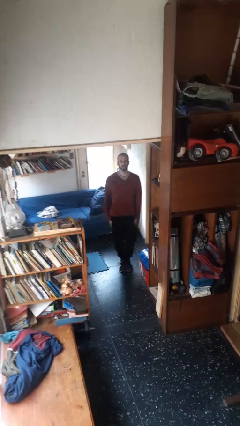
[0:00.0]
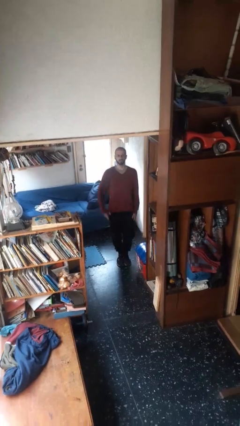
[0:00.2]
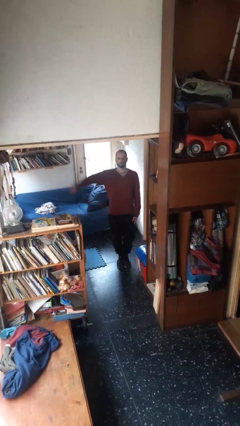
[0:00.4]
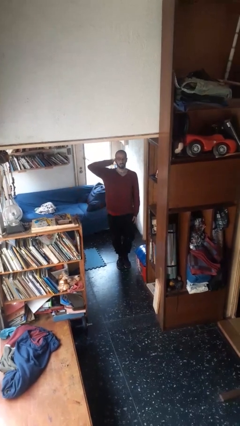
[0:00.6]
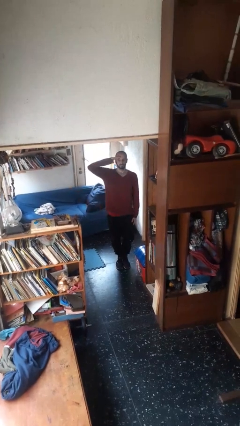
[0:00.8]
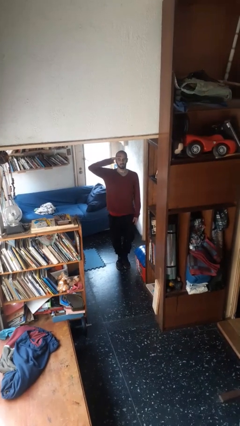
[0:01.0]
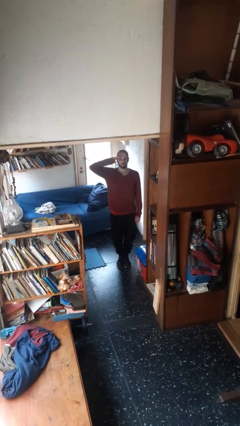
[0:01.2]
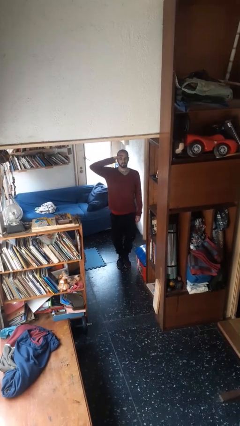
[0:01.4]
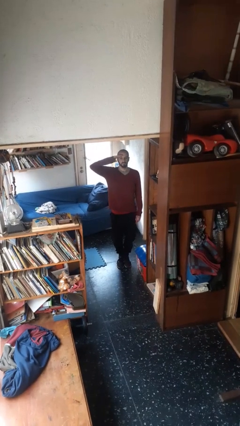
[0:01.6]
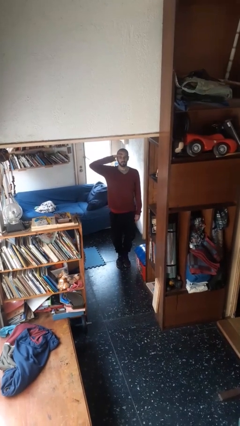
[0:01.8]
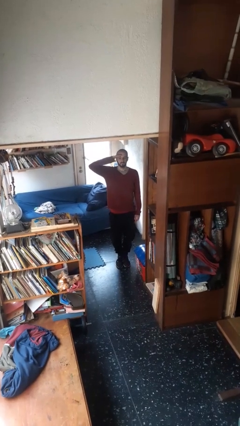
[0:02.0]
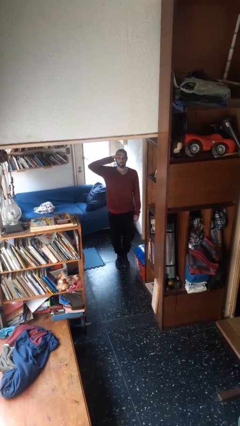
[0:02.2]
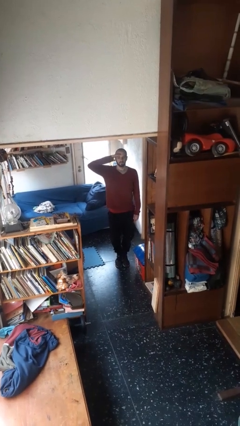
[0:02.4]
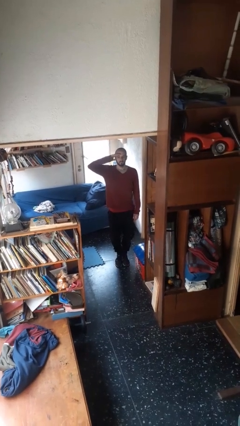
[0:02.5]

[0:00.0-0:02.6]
person salutes

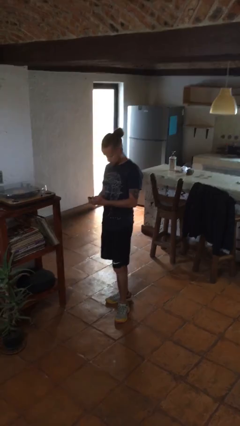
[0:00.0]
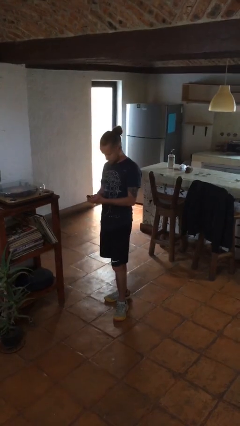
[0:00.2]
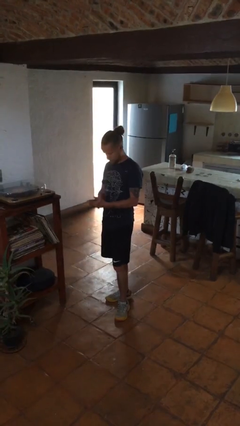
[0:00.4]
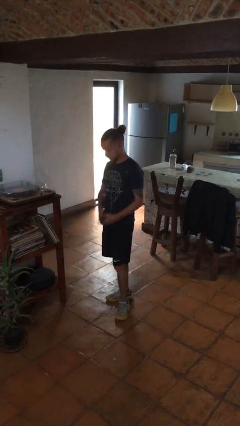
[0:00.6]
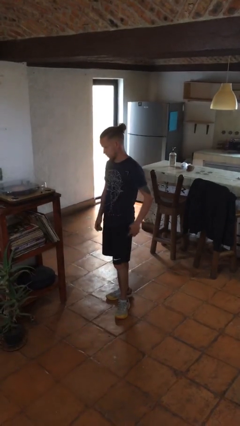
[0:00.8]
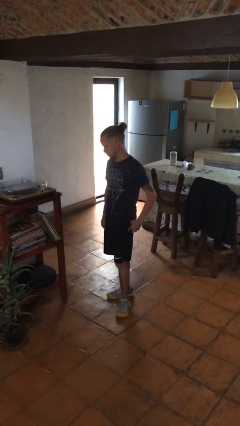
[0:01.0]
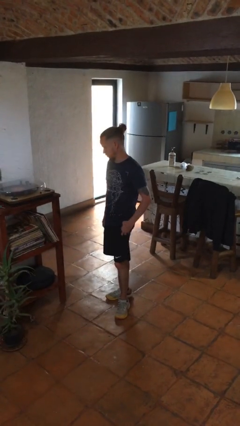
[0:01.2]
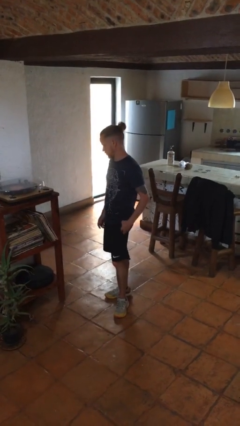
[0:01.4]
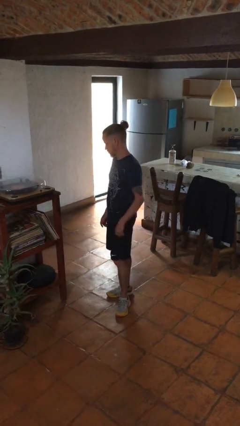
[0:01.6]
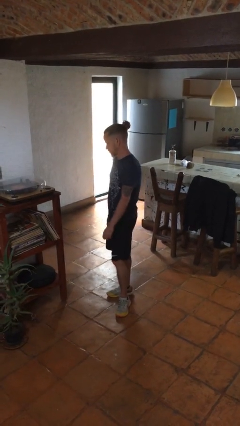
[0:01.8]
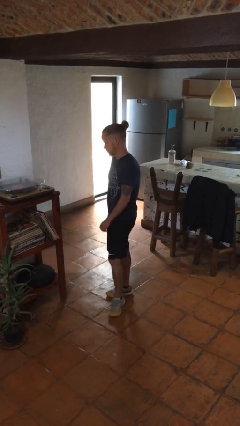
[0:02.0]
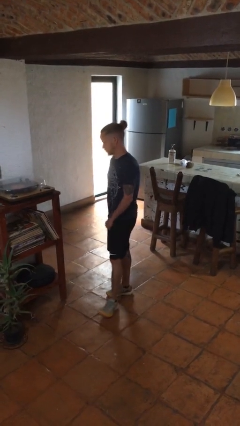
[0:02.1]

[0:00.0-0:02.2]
person puts phone into pocket

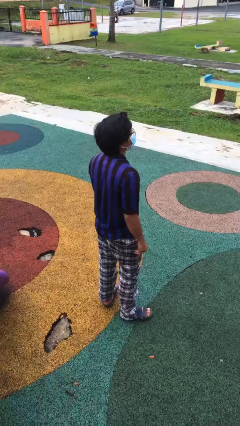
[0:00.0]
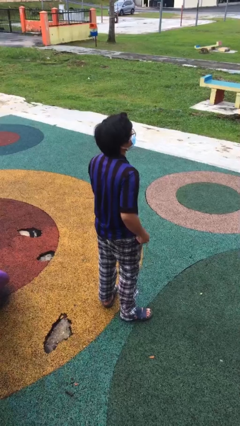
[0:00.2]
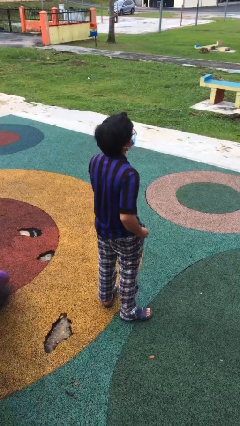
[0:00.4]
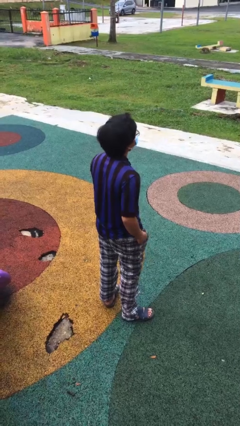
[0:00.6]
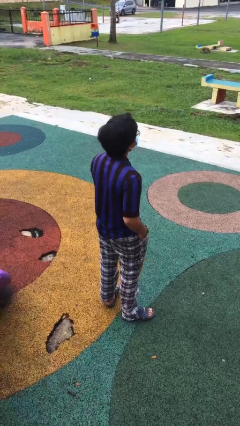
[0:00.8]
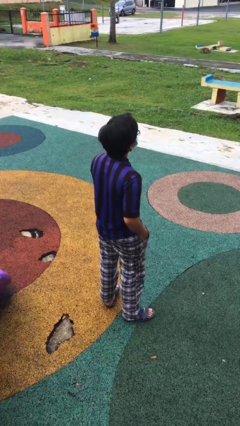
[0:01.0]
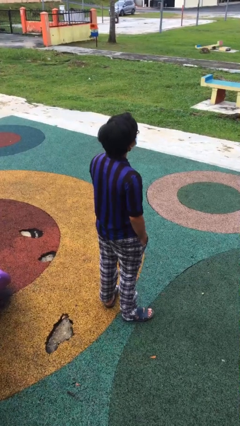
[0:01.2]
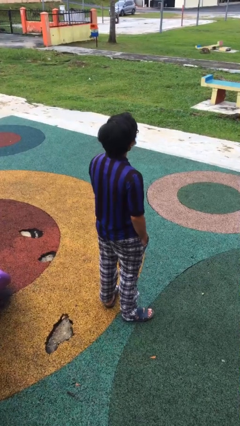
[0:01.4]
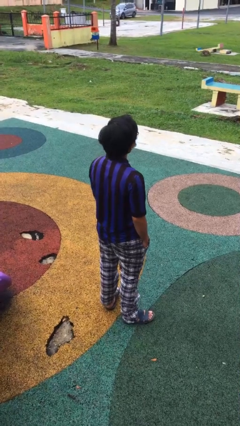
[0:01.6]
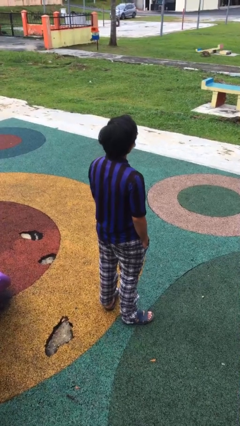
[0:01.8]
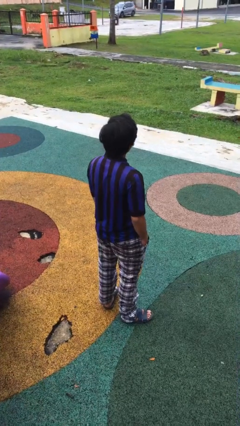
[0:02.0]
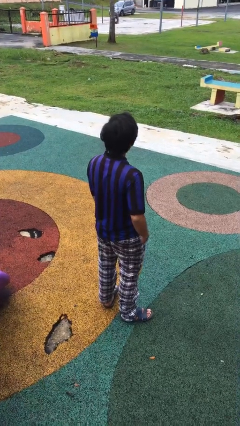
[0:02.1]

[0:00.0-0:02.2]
person puts hands in back pockets

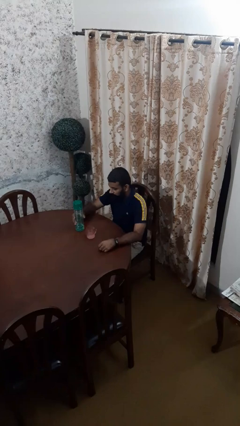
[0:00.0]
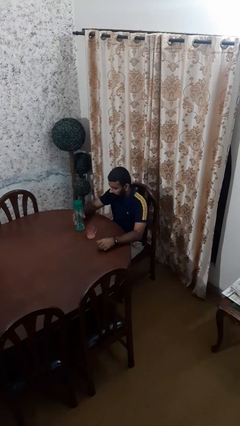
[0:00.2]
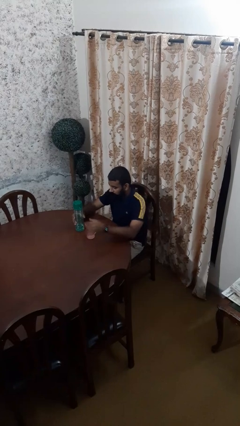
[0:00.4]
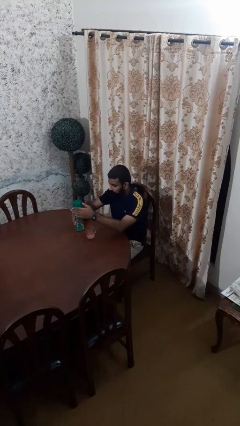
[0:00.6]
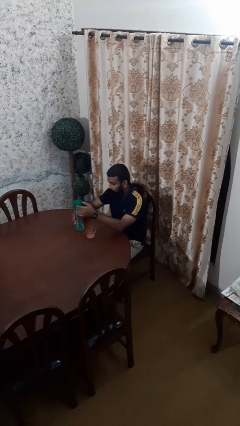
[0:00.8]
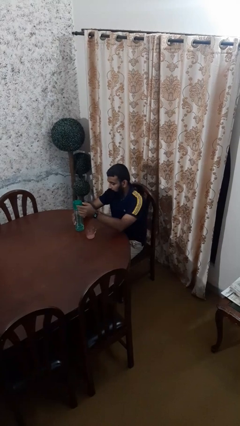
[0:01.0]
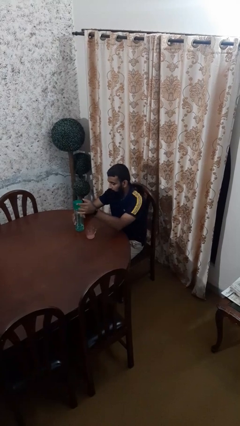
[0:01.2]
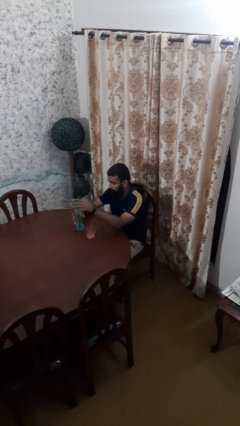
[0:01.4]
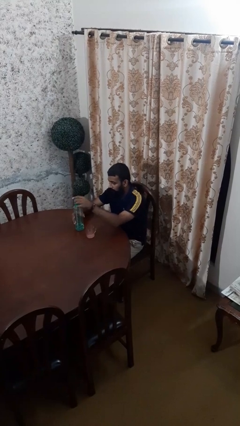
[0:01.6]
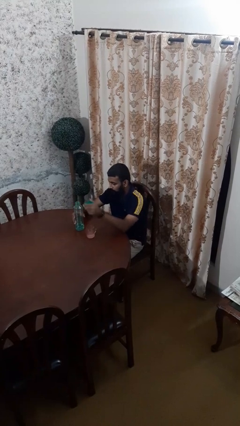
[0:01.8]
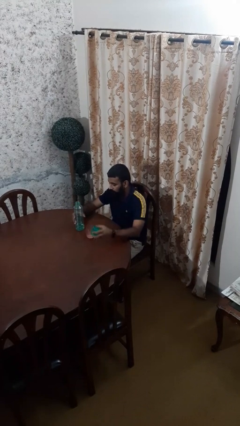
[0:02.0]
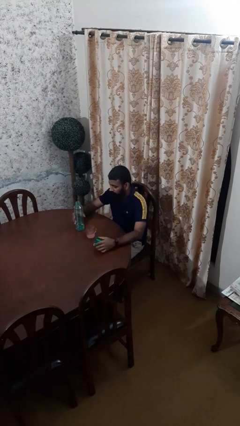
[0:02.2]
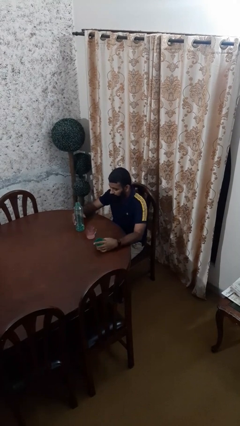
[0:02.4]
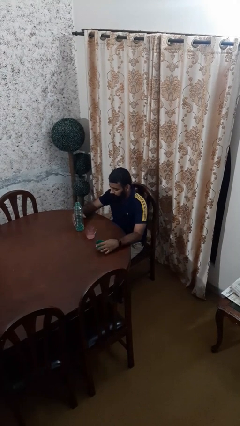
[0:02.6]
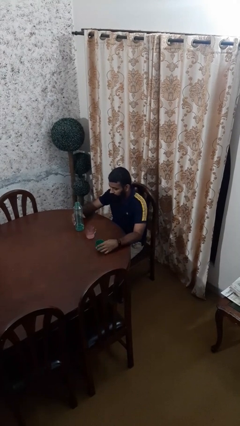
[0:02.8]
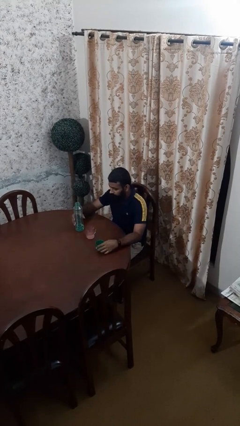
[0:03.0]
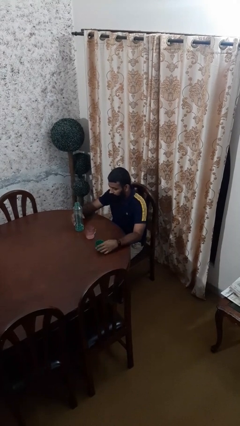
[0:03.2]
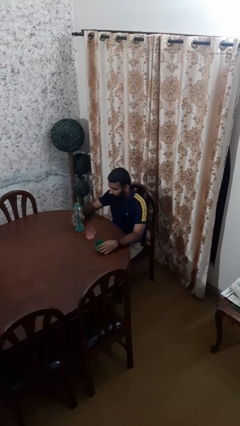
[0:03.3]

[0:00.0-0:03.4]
person unscrews lid from bottle

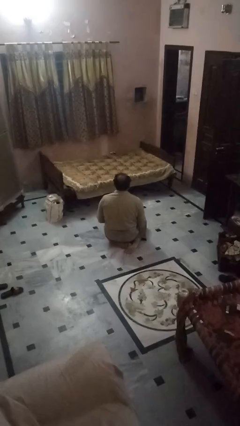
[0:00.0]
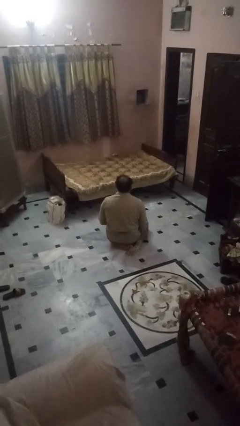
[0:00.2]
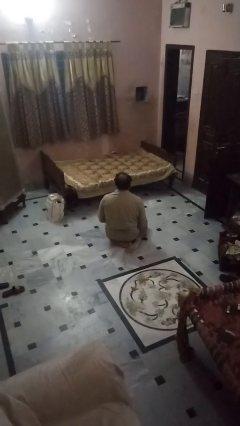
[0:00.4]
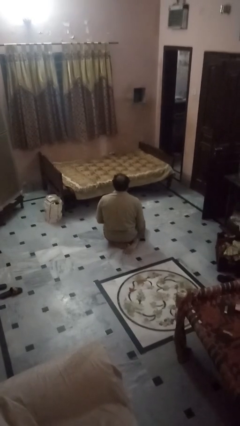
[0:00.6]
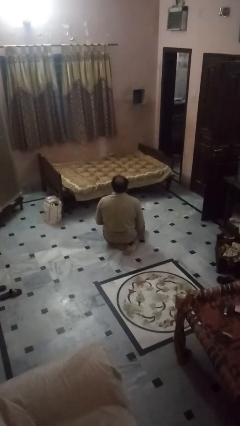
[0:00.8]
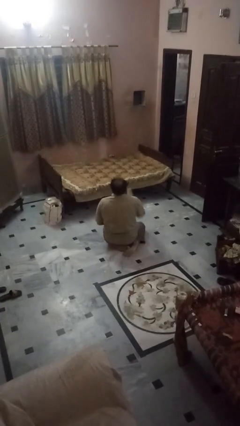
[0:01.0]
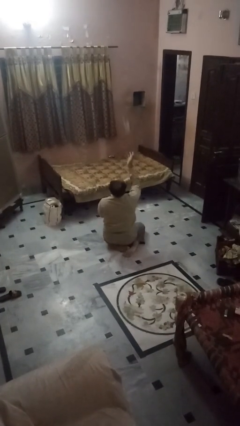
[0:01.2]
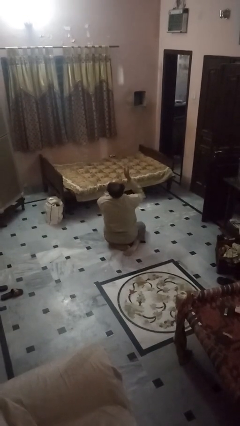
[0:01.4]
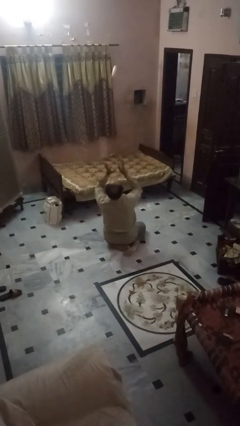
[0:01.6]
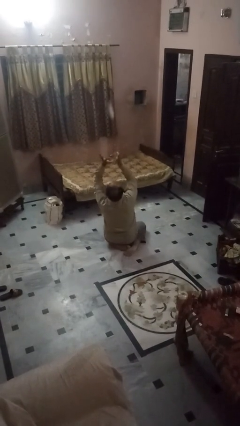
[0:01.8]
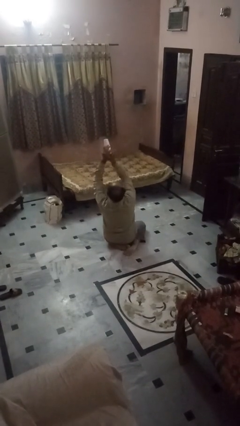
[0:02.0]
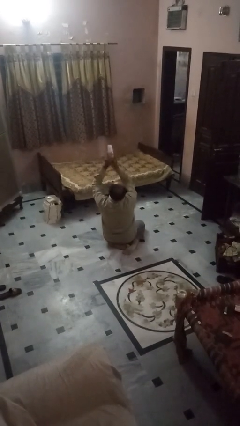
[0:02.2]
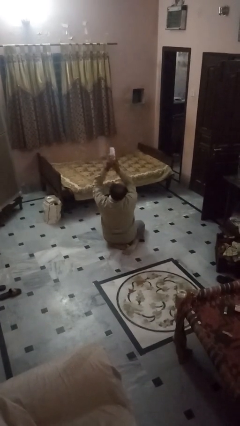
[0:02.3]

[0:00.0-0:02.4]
person drops object

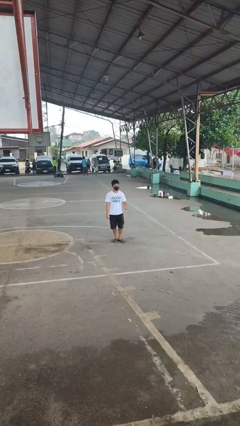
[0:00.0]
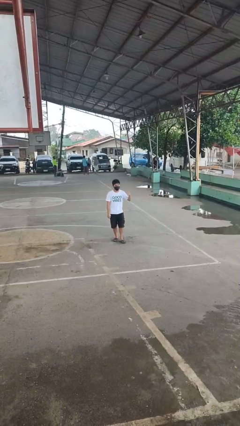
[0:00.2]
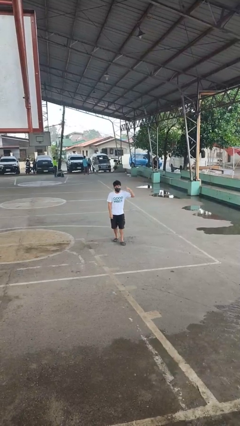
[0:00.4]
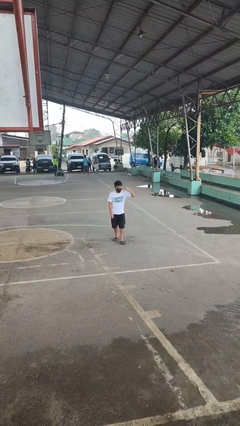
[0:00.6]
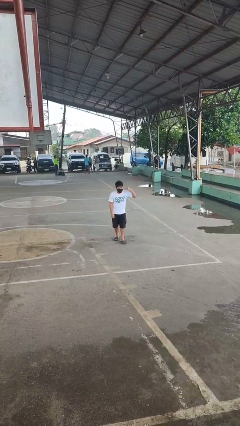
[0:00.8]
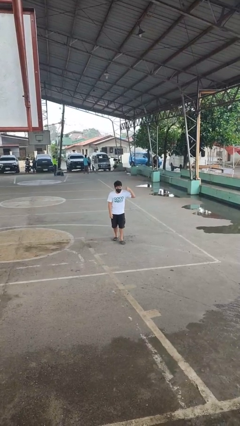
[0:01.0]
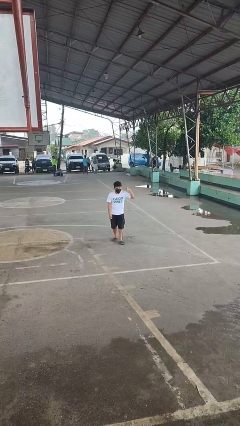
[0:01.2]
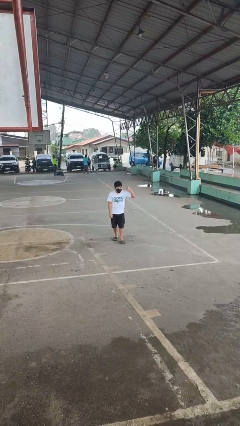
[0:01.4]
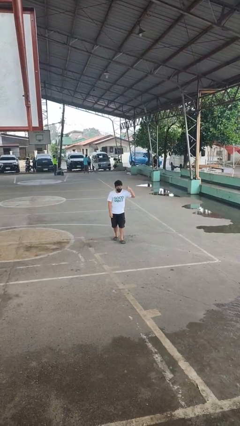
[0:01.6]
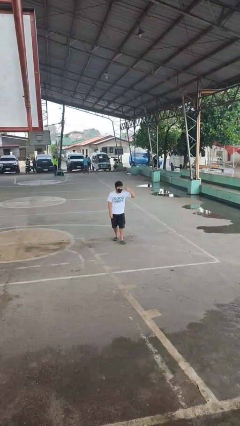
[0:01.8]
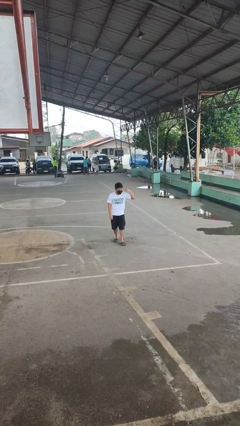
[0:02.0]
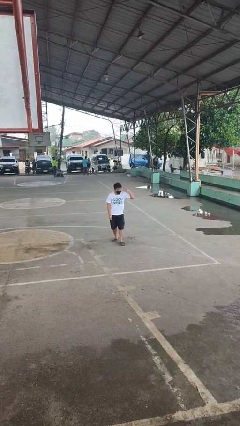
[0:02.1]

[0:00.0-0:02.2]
person gestures listen closely

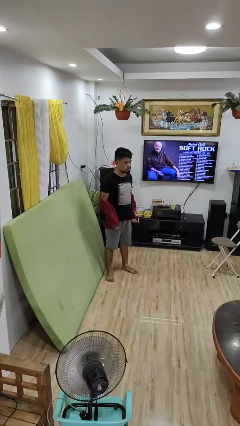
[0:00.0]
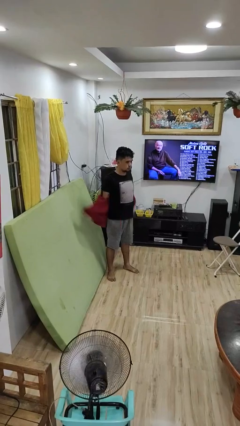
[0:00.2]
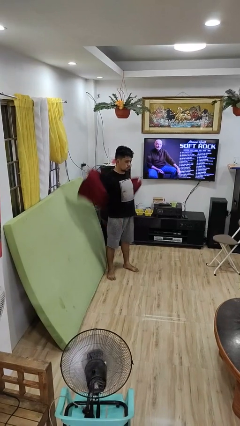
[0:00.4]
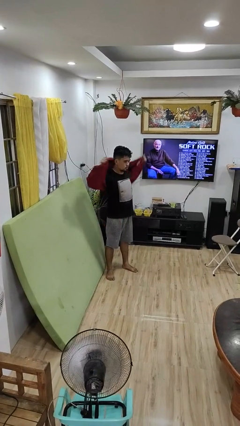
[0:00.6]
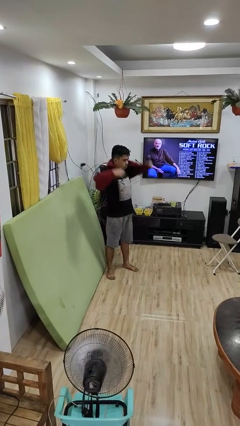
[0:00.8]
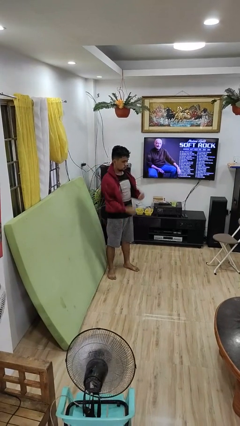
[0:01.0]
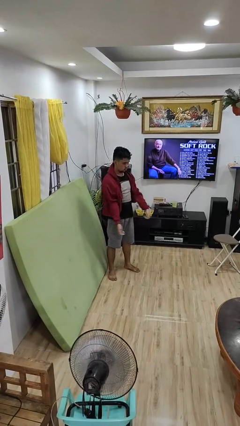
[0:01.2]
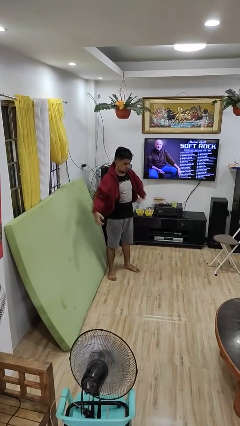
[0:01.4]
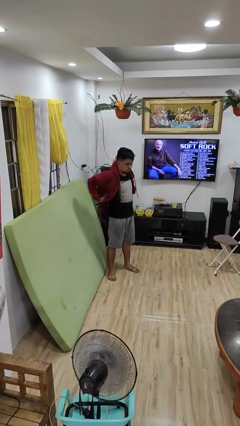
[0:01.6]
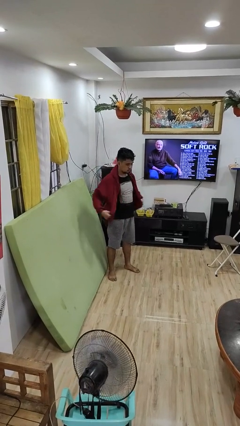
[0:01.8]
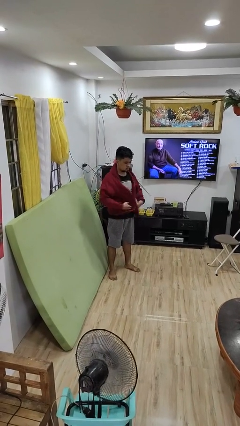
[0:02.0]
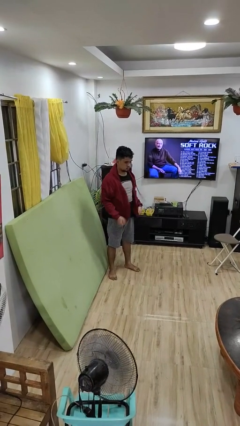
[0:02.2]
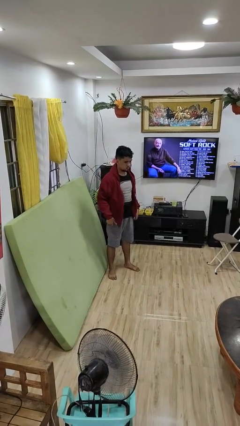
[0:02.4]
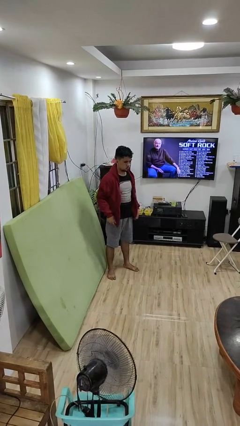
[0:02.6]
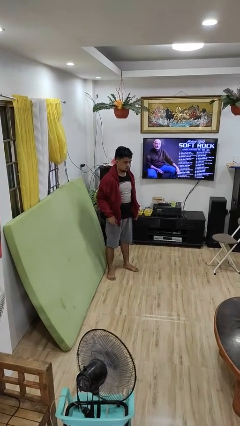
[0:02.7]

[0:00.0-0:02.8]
person puts on jacket
